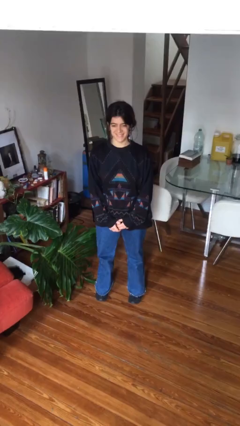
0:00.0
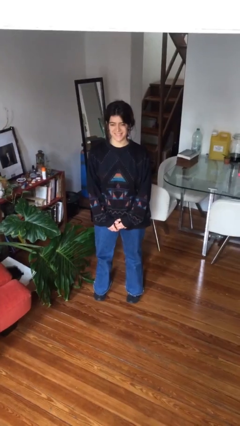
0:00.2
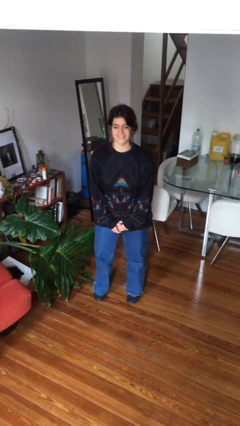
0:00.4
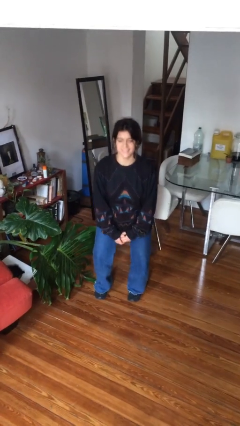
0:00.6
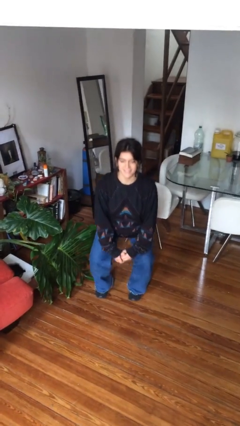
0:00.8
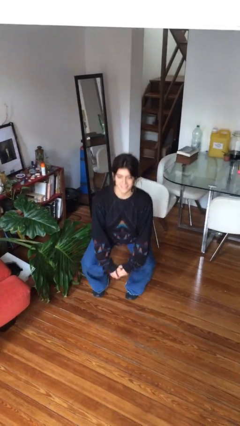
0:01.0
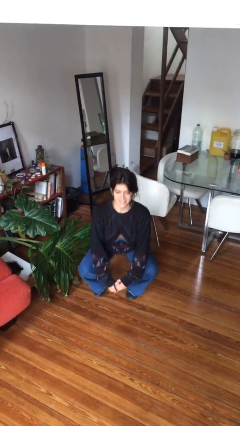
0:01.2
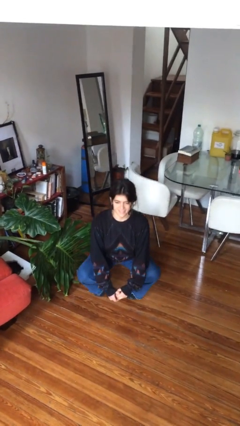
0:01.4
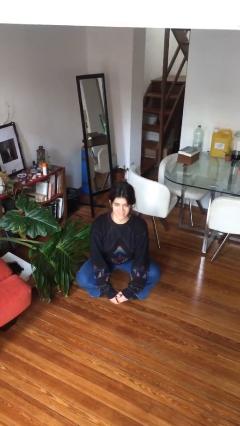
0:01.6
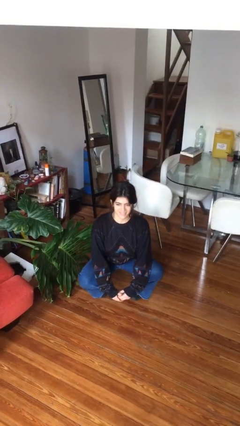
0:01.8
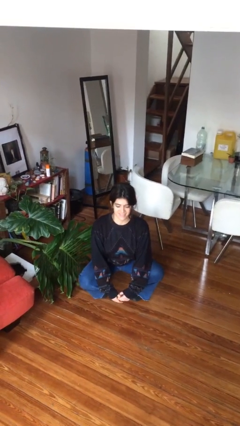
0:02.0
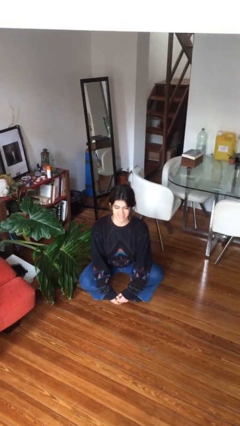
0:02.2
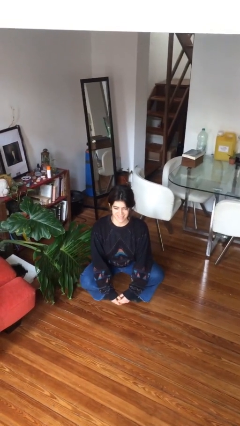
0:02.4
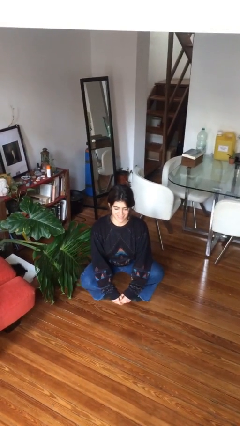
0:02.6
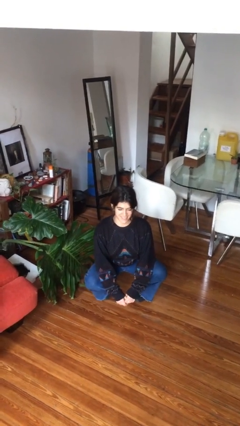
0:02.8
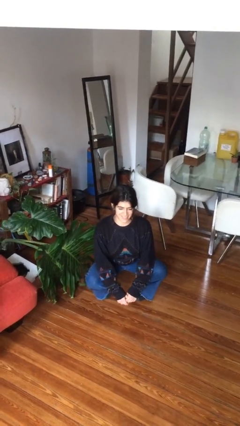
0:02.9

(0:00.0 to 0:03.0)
person squats

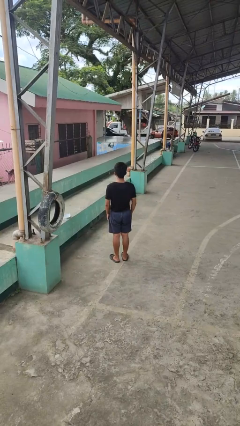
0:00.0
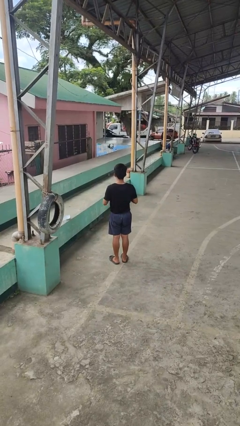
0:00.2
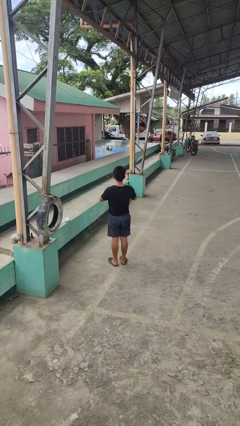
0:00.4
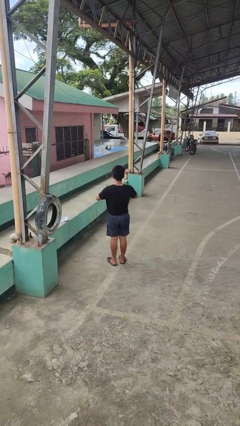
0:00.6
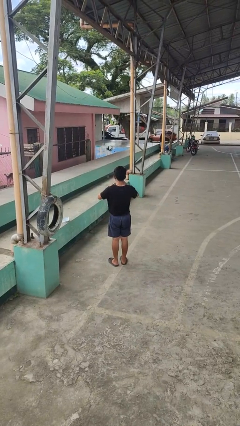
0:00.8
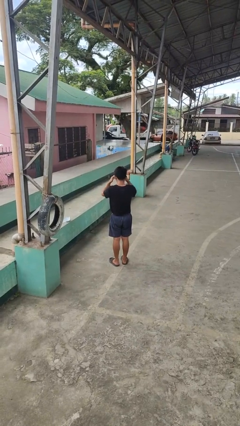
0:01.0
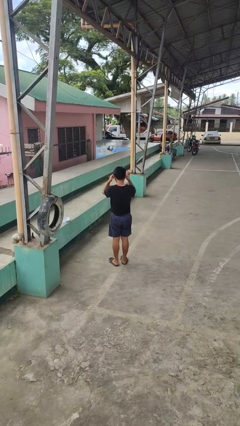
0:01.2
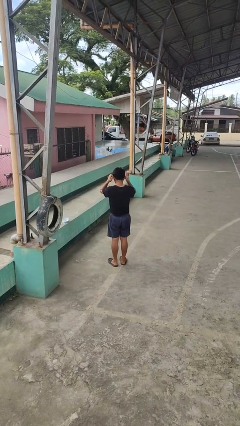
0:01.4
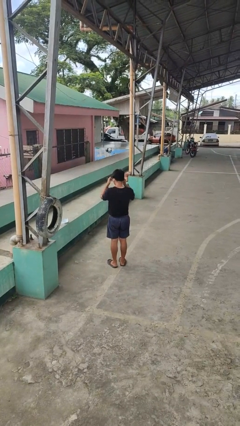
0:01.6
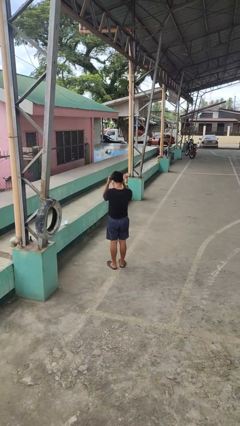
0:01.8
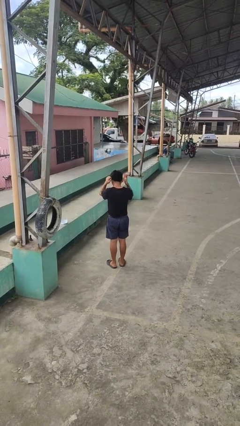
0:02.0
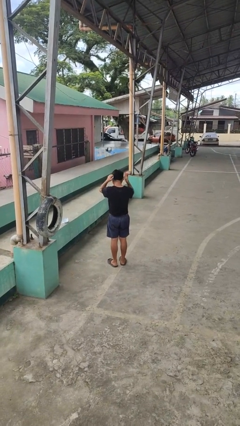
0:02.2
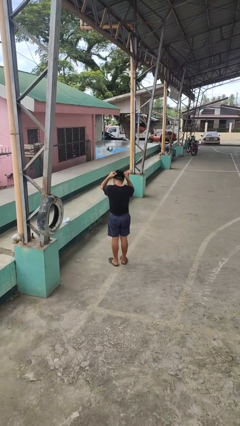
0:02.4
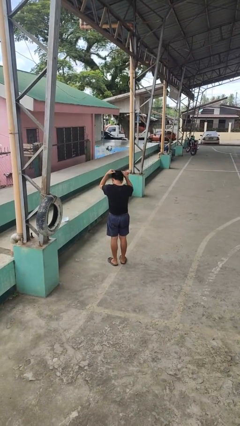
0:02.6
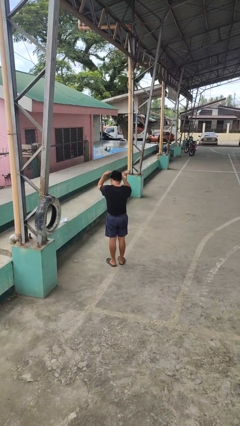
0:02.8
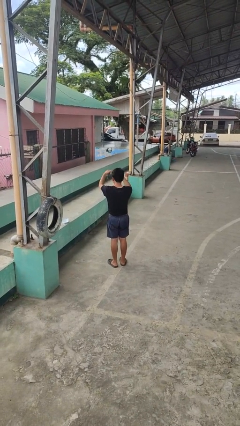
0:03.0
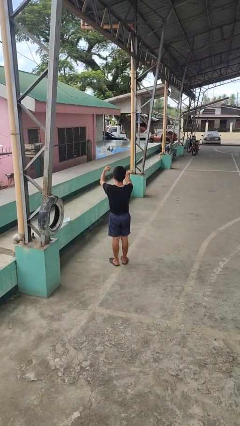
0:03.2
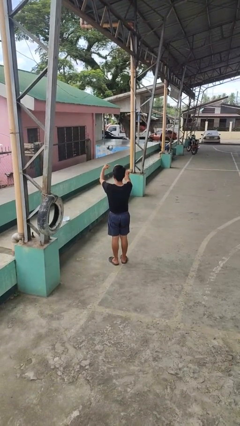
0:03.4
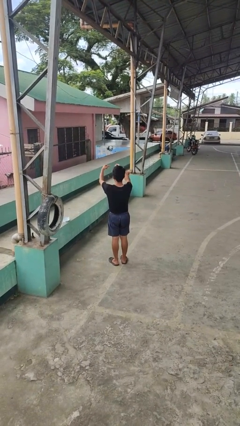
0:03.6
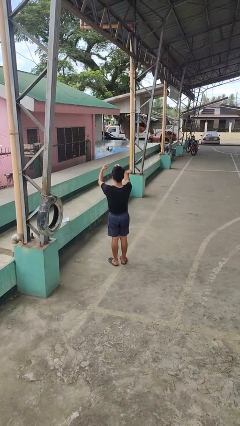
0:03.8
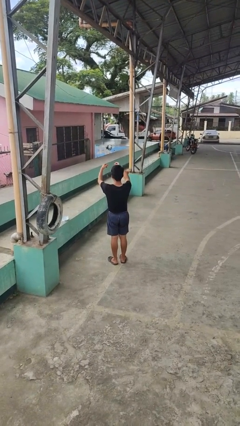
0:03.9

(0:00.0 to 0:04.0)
person takes off necklace

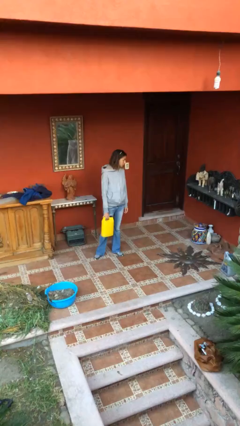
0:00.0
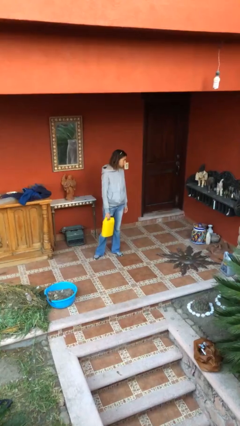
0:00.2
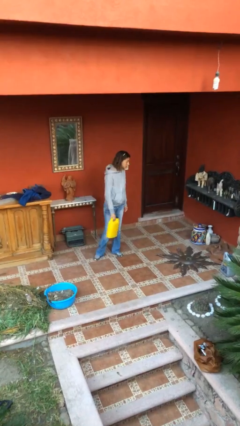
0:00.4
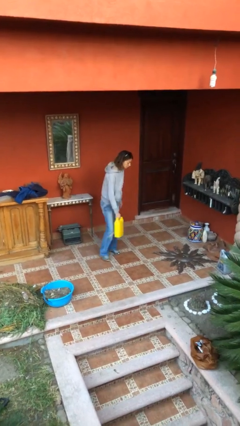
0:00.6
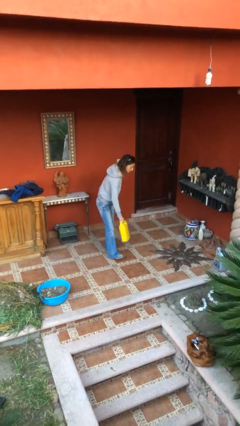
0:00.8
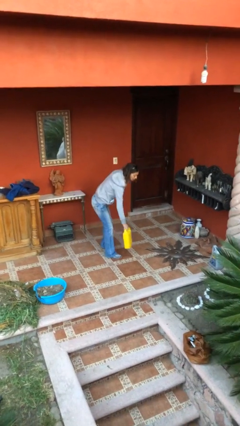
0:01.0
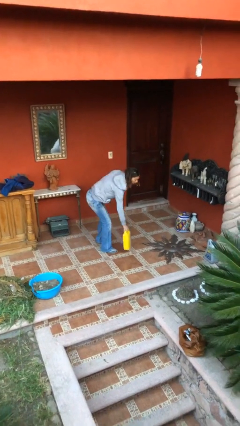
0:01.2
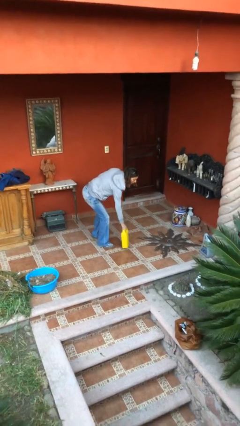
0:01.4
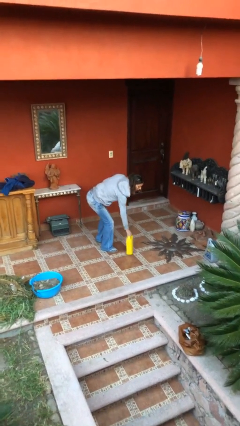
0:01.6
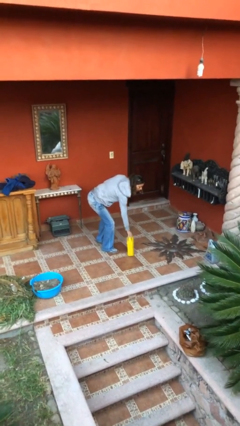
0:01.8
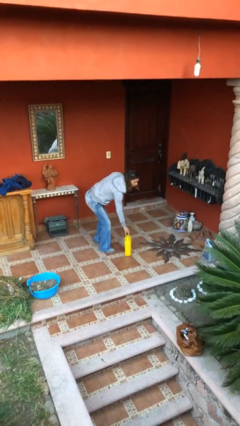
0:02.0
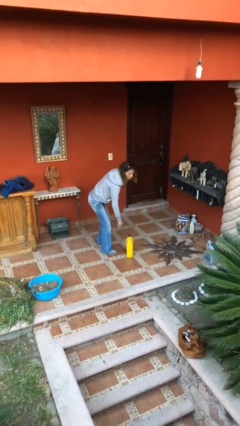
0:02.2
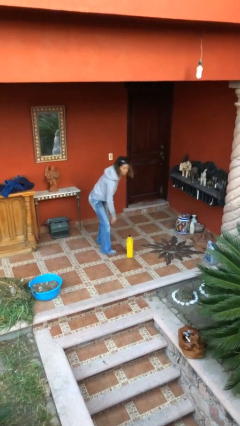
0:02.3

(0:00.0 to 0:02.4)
person puts down object on floor

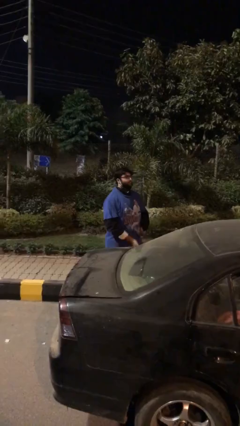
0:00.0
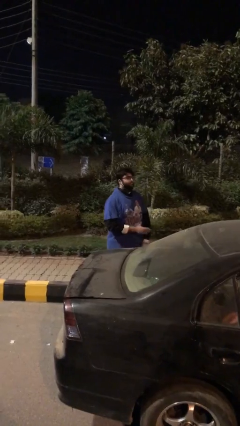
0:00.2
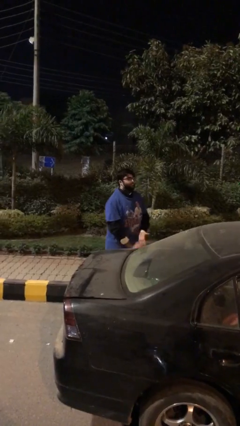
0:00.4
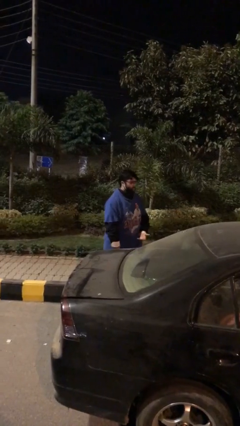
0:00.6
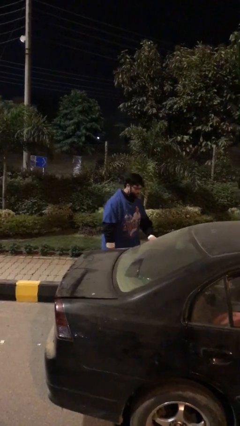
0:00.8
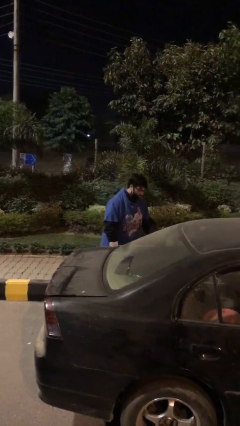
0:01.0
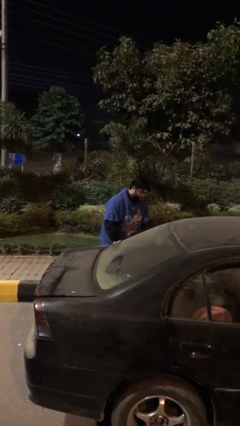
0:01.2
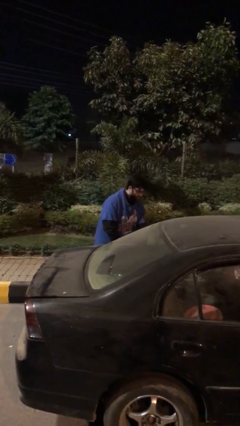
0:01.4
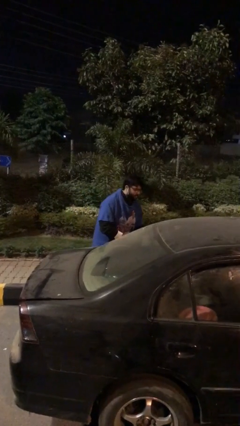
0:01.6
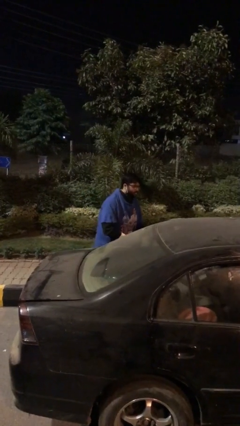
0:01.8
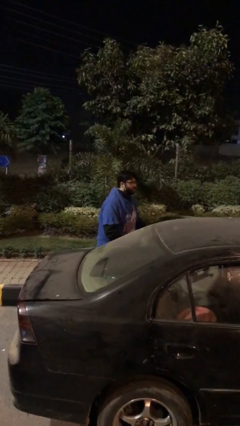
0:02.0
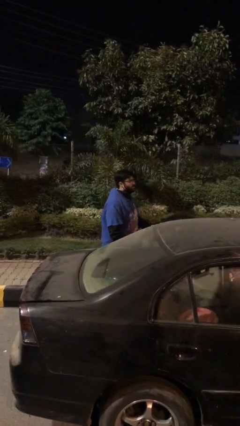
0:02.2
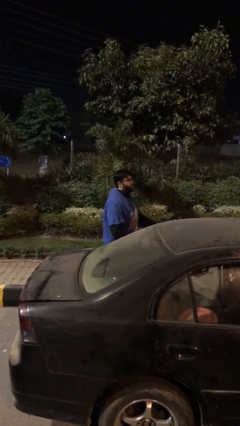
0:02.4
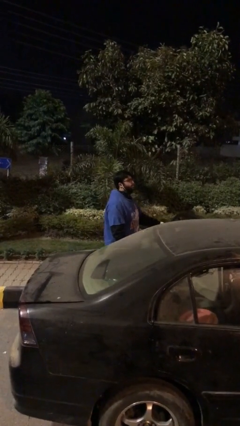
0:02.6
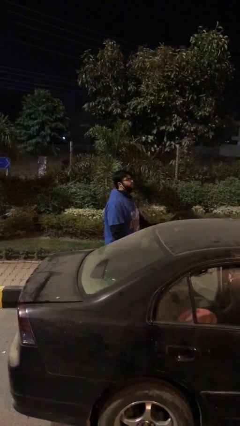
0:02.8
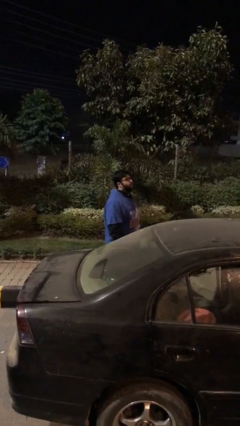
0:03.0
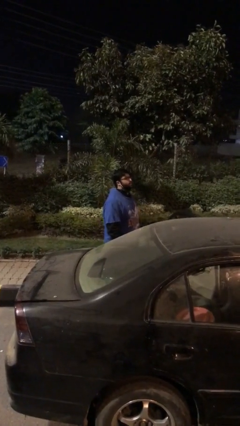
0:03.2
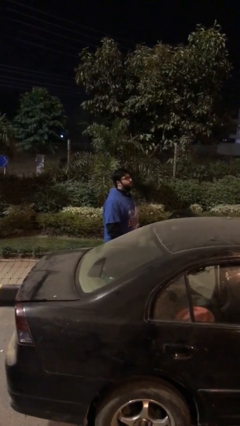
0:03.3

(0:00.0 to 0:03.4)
person opens car door

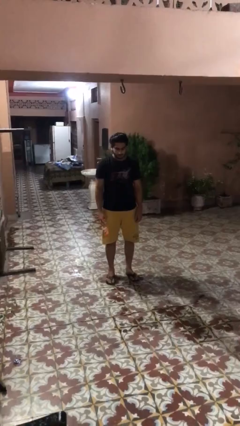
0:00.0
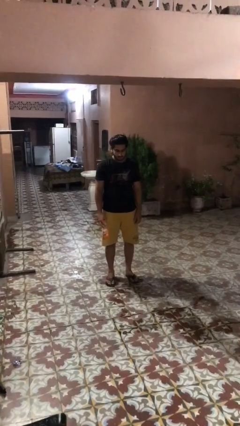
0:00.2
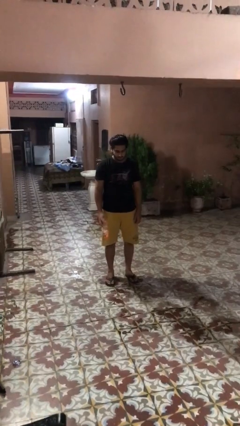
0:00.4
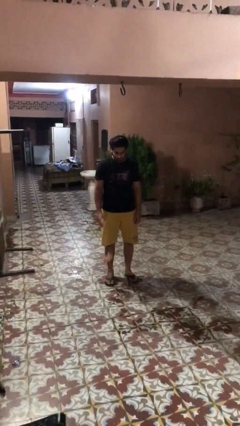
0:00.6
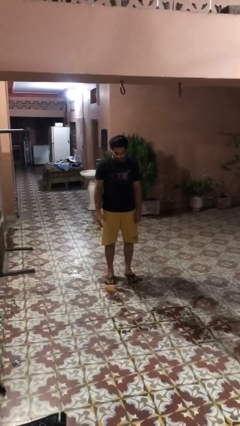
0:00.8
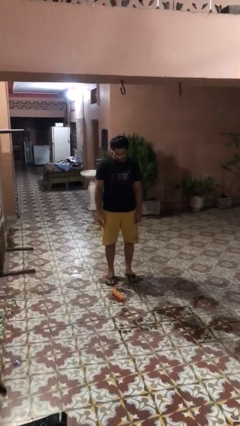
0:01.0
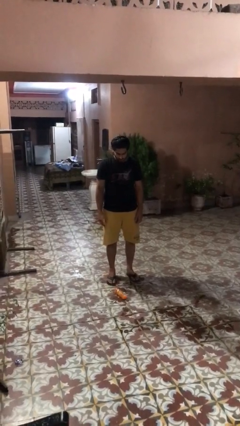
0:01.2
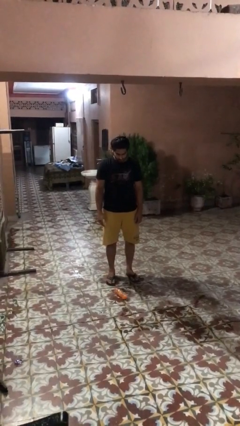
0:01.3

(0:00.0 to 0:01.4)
person throws object into air

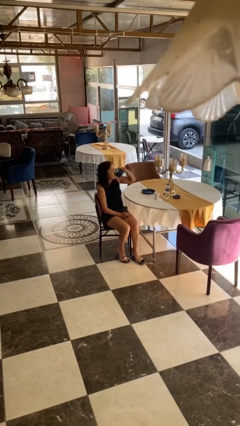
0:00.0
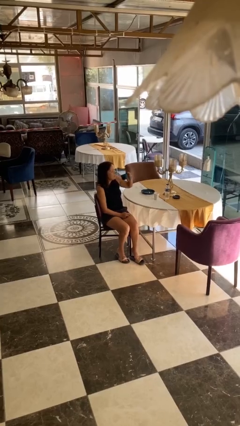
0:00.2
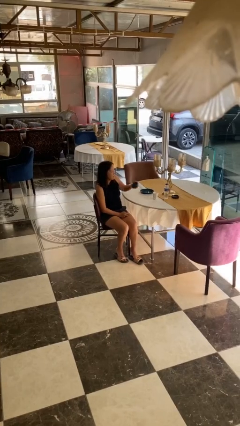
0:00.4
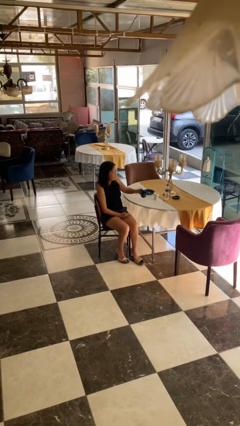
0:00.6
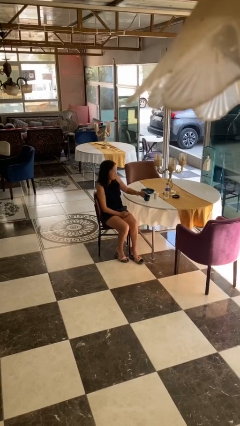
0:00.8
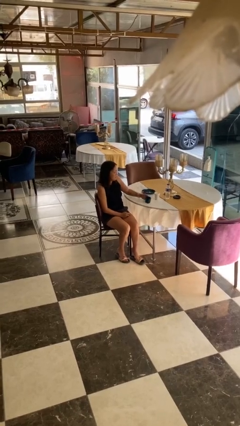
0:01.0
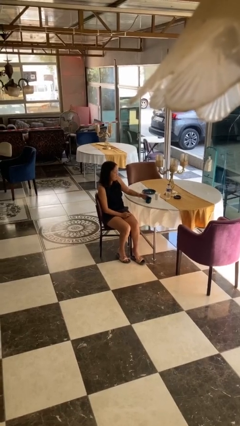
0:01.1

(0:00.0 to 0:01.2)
person puts down object on table

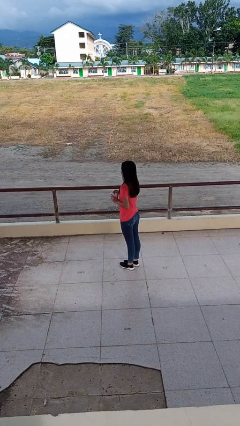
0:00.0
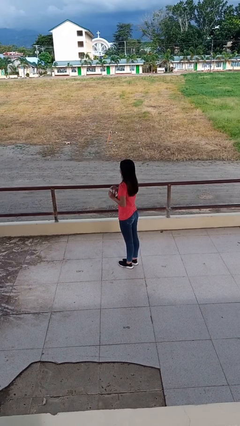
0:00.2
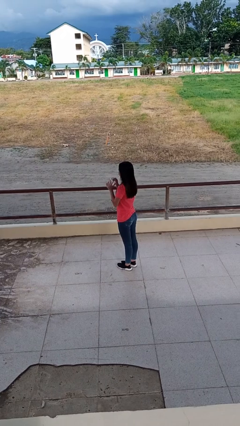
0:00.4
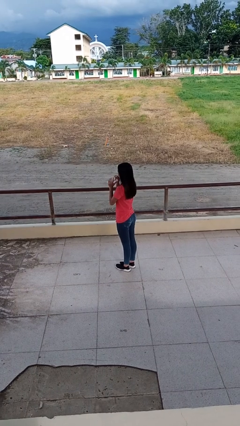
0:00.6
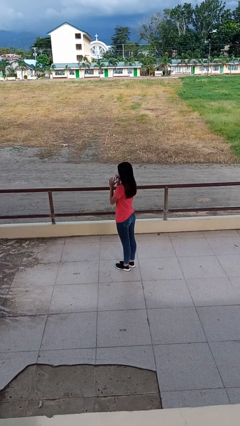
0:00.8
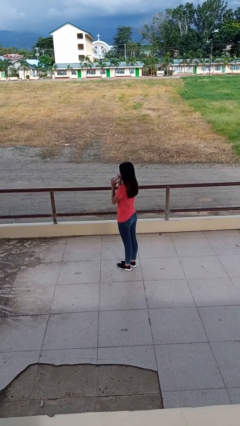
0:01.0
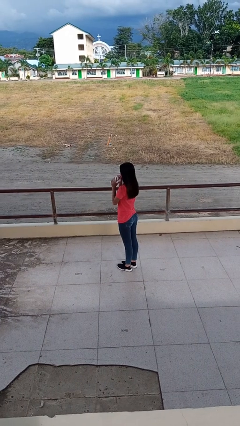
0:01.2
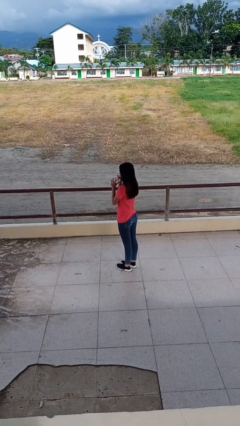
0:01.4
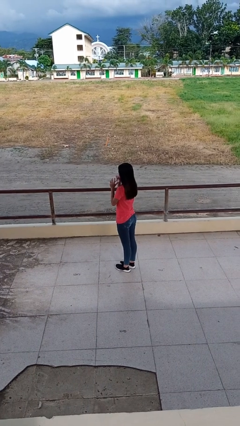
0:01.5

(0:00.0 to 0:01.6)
person drinks from straw

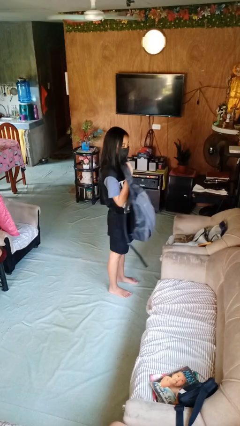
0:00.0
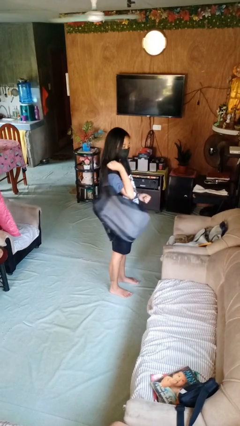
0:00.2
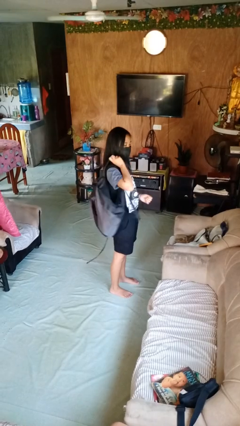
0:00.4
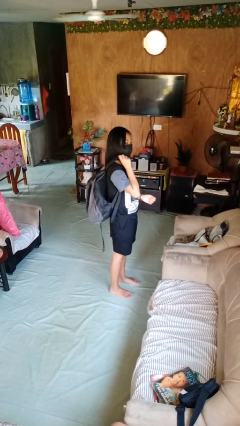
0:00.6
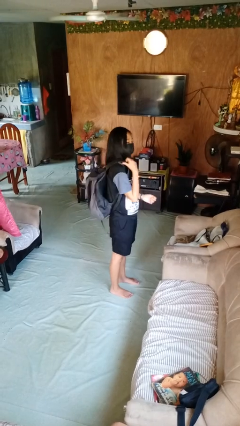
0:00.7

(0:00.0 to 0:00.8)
person puts on backpack
